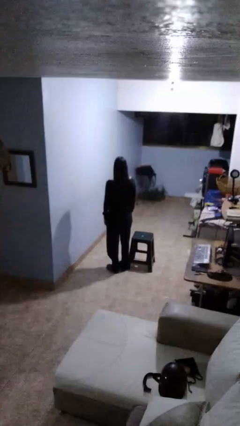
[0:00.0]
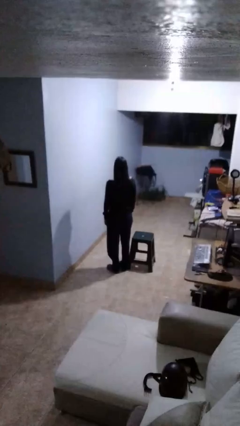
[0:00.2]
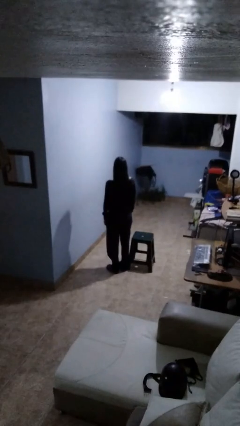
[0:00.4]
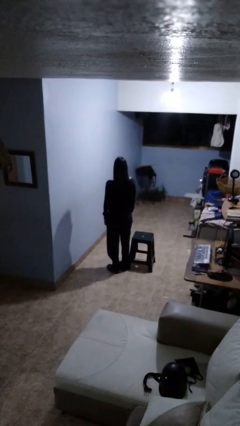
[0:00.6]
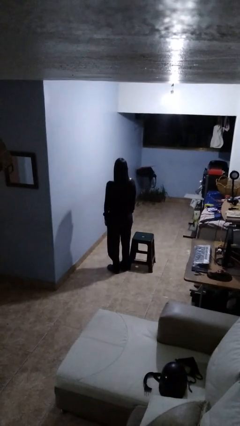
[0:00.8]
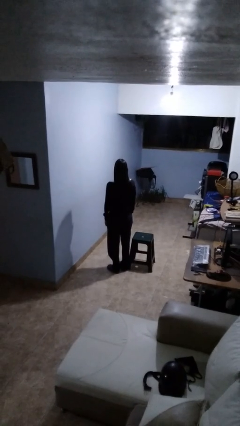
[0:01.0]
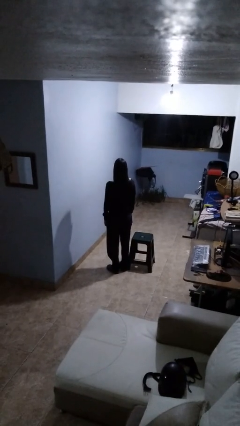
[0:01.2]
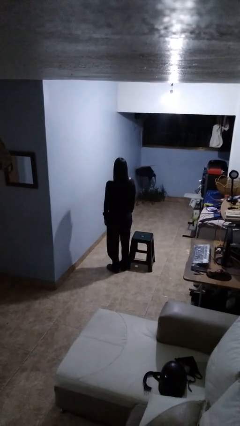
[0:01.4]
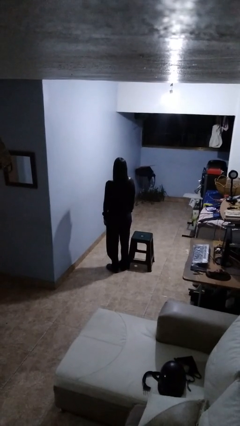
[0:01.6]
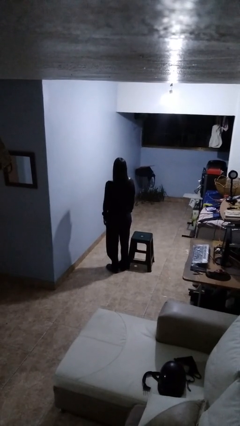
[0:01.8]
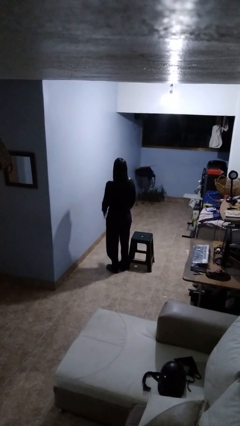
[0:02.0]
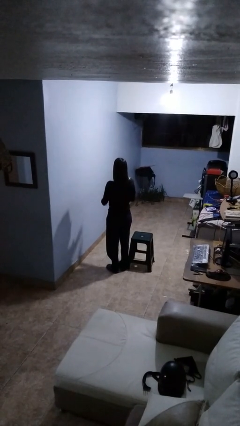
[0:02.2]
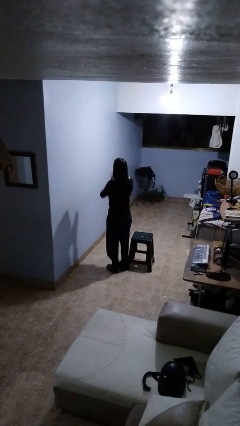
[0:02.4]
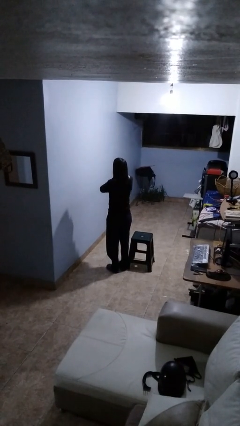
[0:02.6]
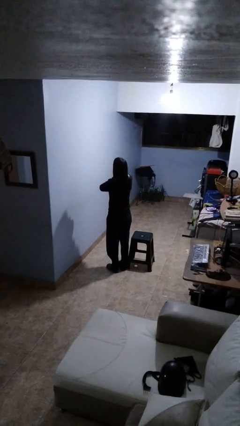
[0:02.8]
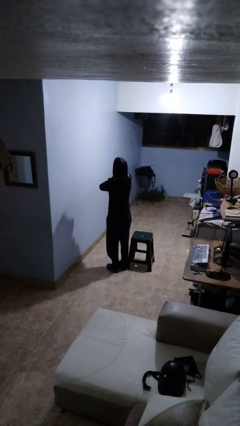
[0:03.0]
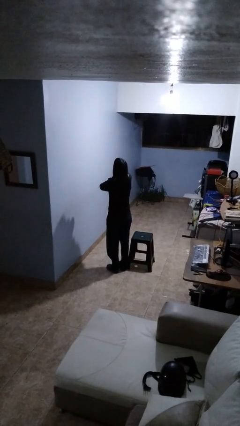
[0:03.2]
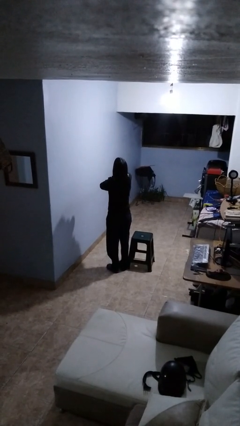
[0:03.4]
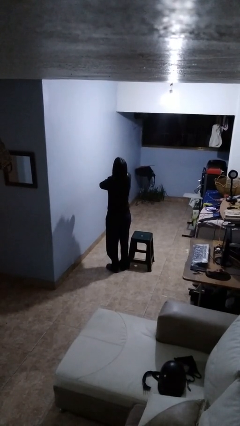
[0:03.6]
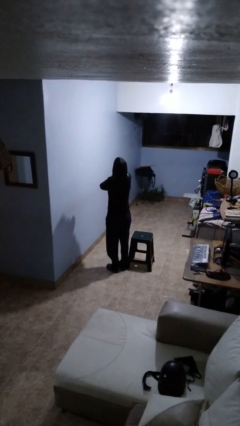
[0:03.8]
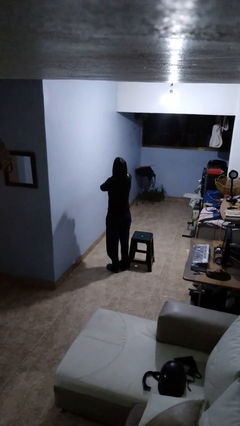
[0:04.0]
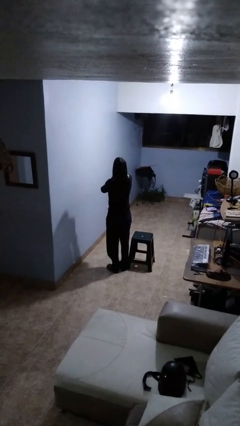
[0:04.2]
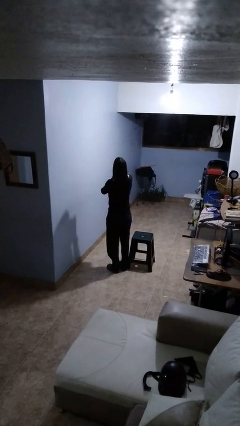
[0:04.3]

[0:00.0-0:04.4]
person yawns

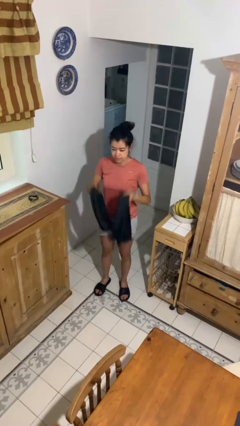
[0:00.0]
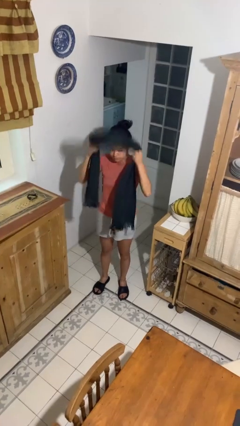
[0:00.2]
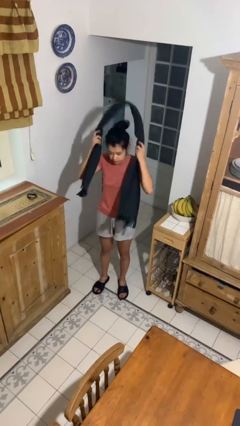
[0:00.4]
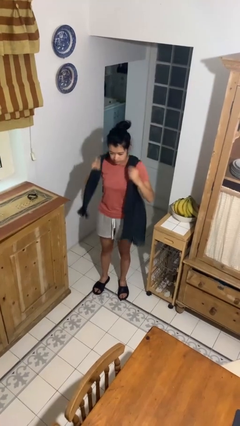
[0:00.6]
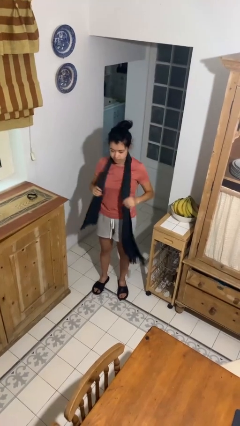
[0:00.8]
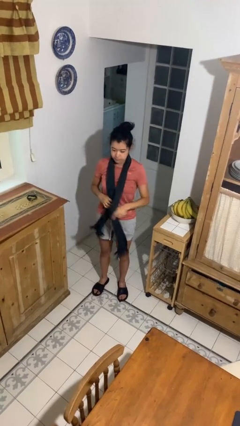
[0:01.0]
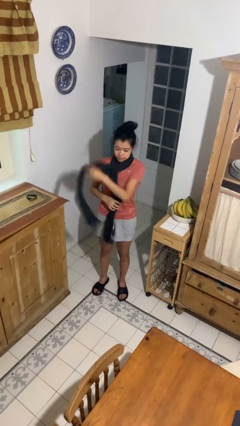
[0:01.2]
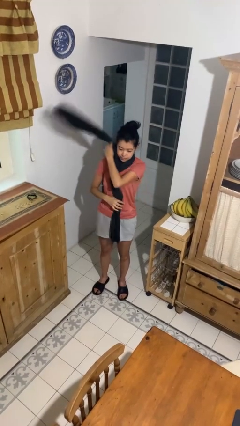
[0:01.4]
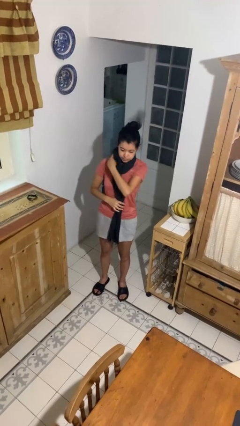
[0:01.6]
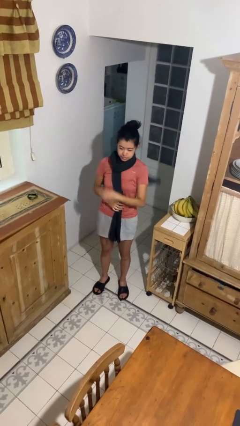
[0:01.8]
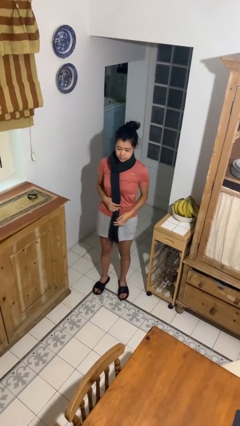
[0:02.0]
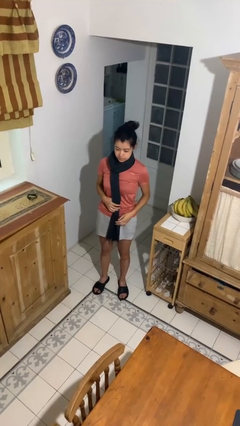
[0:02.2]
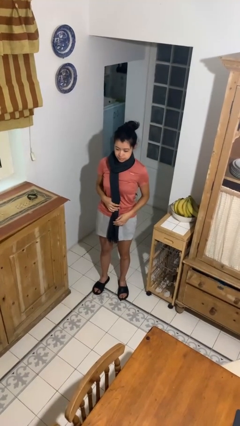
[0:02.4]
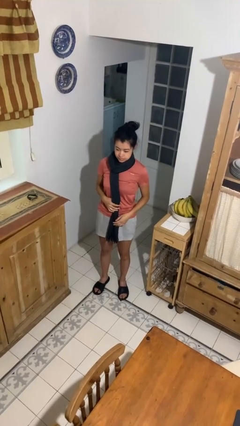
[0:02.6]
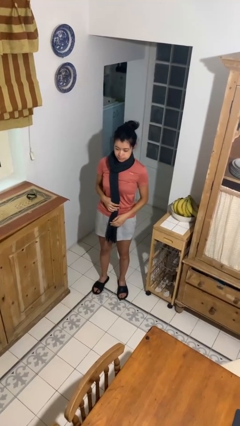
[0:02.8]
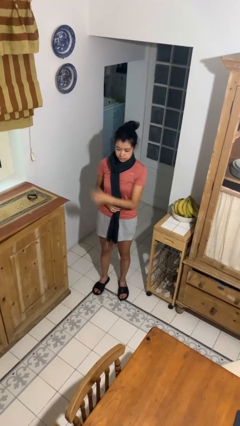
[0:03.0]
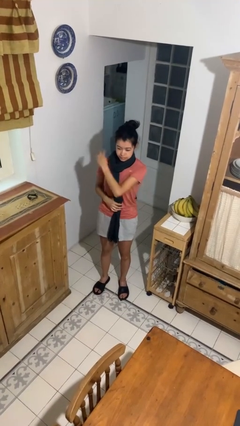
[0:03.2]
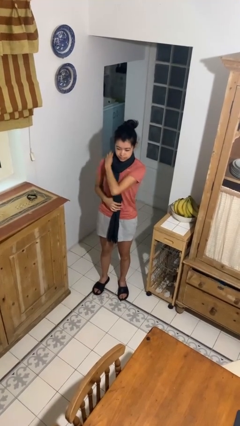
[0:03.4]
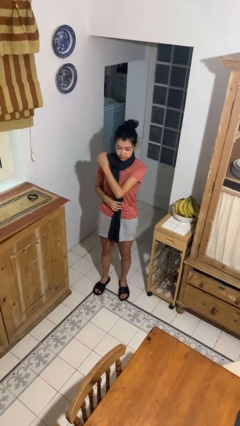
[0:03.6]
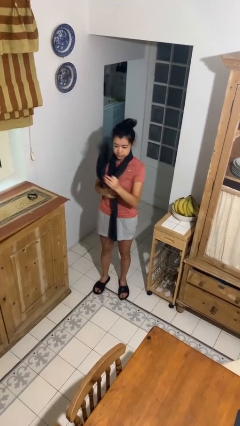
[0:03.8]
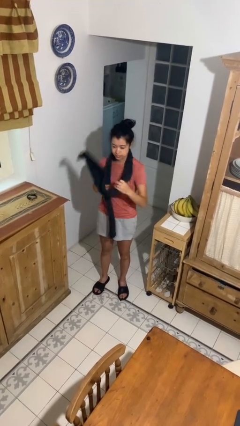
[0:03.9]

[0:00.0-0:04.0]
person puts on scarf

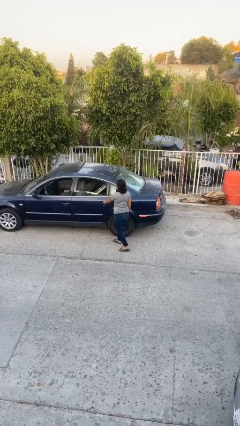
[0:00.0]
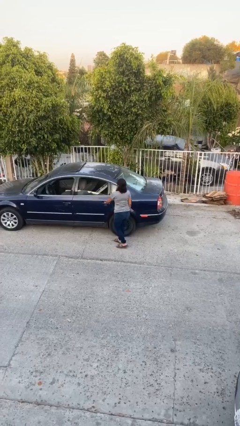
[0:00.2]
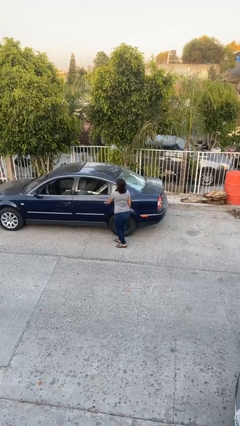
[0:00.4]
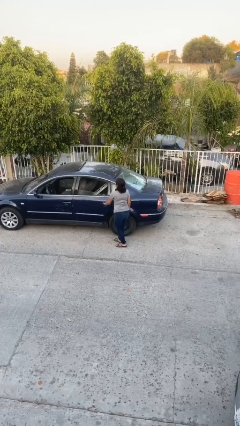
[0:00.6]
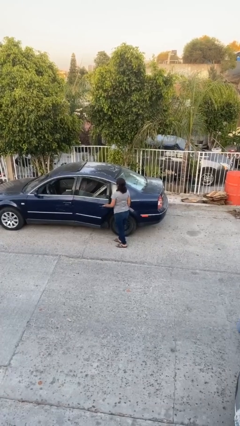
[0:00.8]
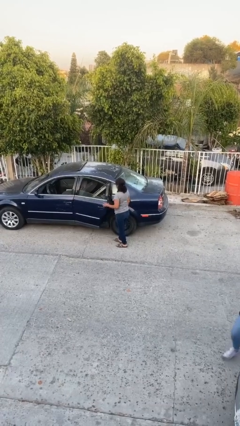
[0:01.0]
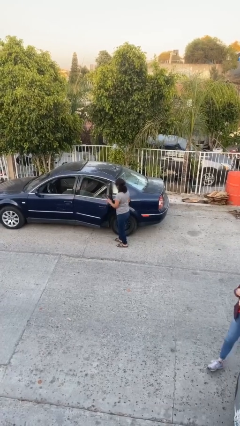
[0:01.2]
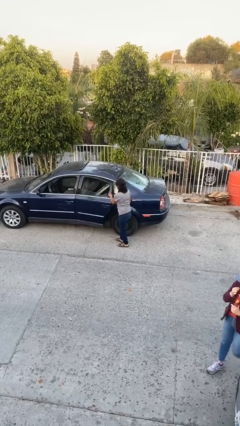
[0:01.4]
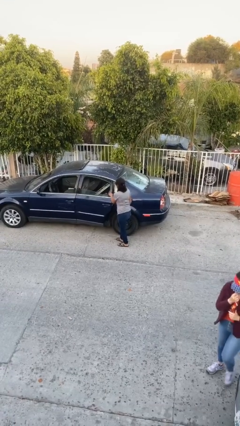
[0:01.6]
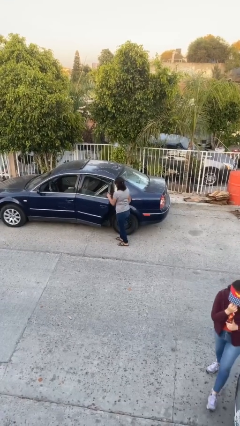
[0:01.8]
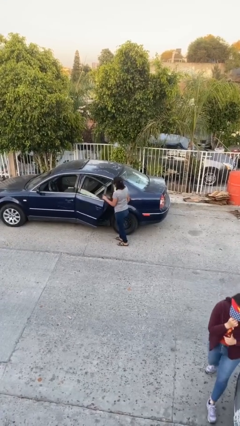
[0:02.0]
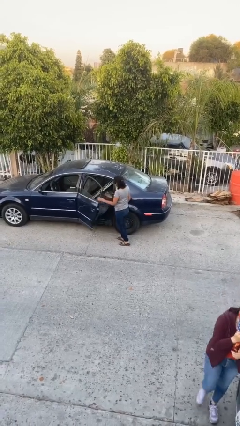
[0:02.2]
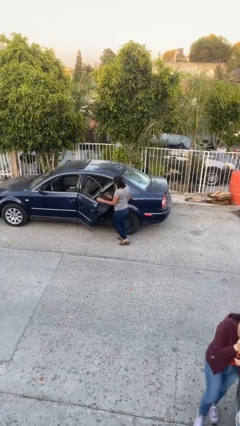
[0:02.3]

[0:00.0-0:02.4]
person opens car door

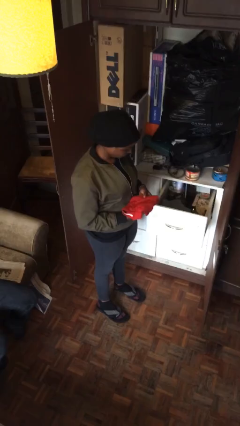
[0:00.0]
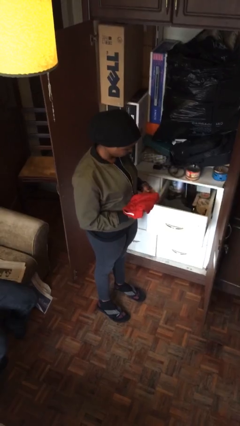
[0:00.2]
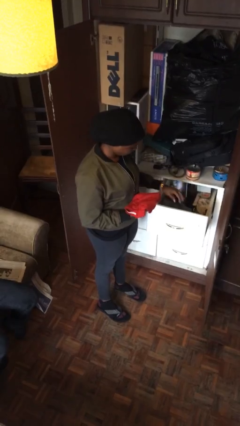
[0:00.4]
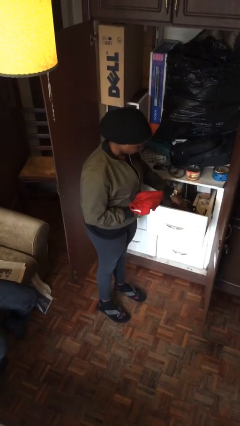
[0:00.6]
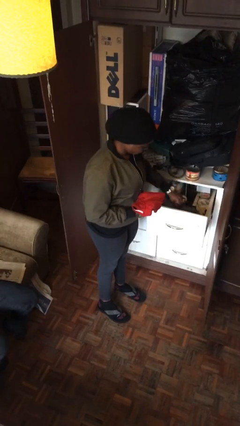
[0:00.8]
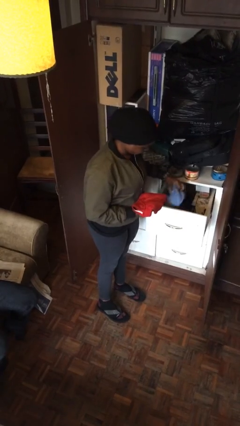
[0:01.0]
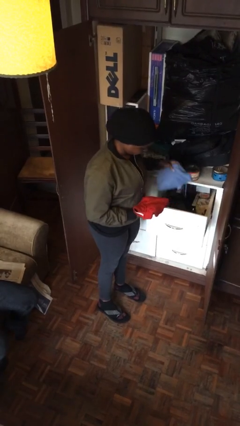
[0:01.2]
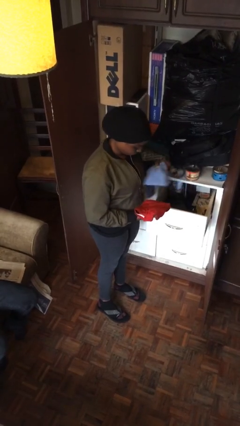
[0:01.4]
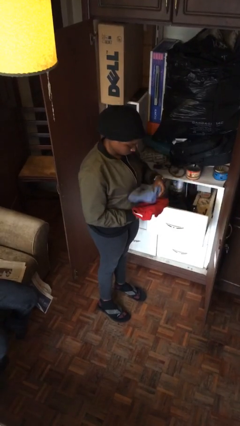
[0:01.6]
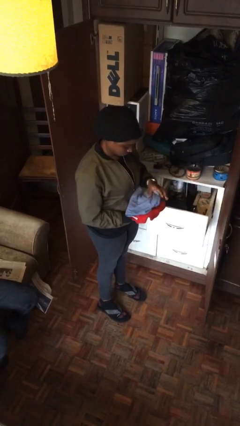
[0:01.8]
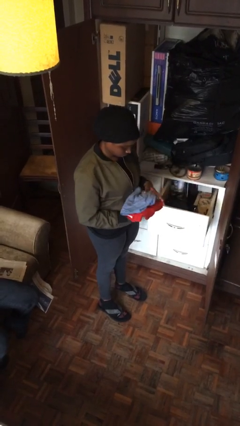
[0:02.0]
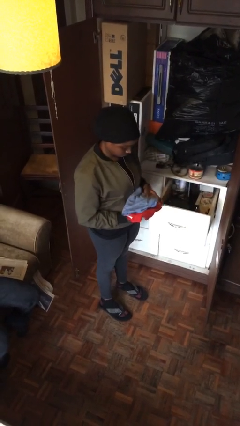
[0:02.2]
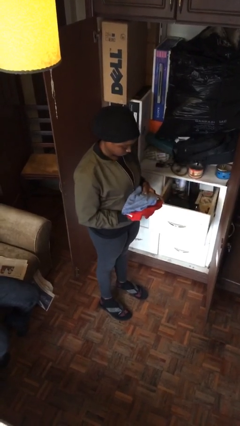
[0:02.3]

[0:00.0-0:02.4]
person takes clothes from dresser

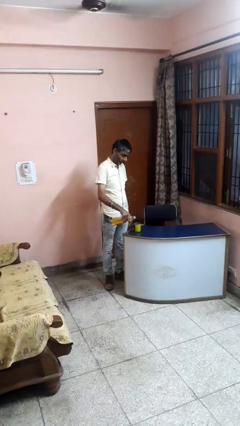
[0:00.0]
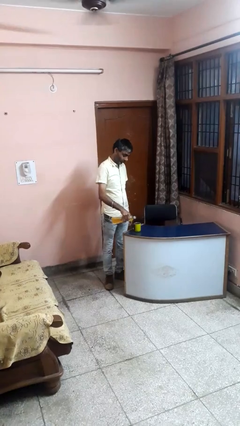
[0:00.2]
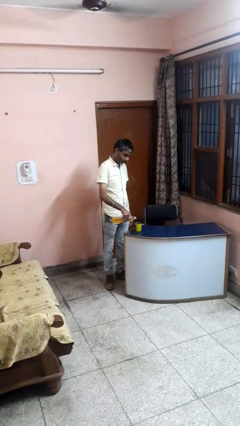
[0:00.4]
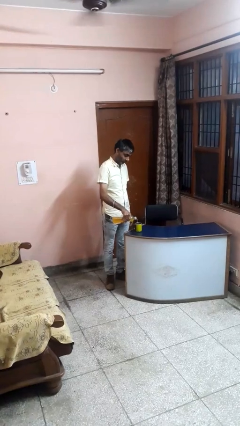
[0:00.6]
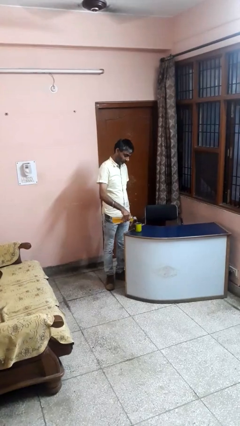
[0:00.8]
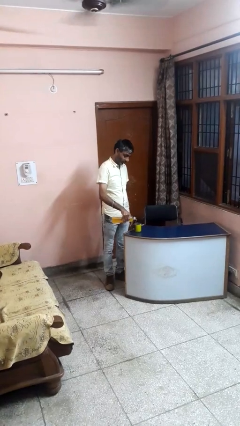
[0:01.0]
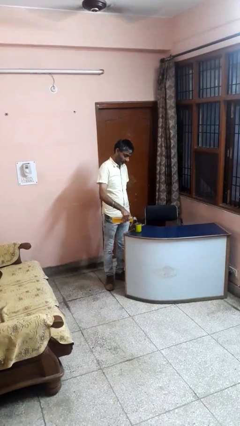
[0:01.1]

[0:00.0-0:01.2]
person pours liquid into cup

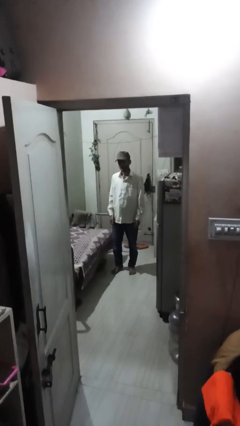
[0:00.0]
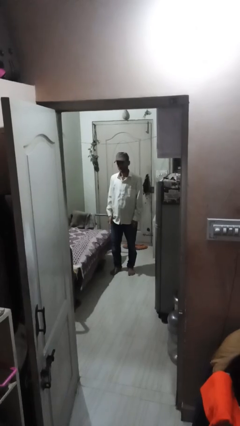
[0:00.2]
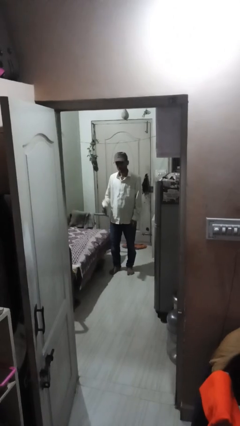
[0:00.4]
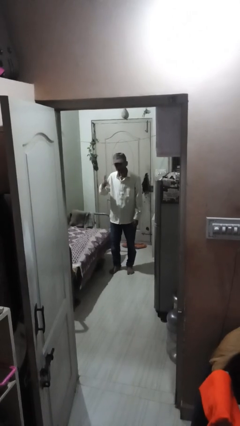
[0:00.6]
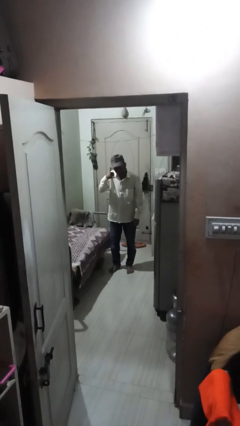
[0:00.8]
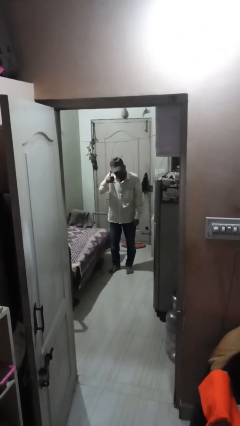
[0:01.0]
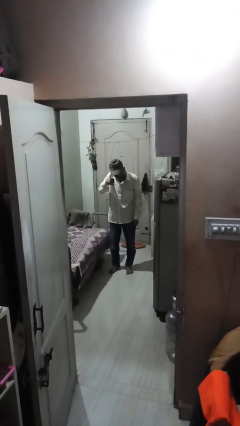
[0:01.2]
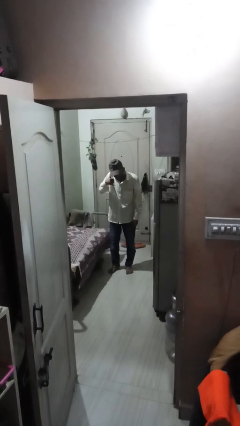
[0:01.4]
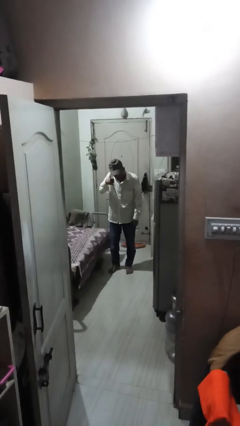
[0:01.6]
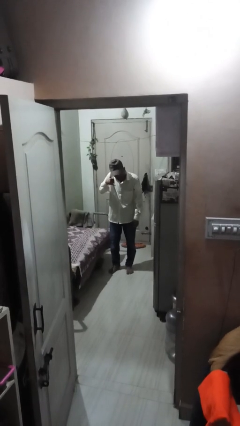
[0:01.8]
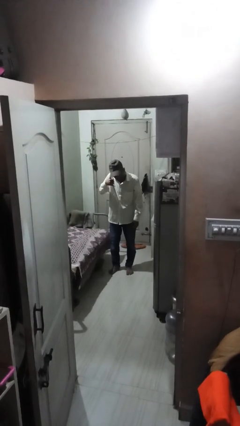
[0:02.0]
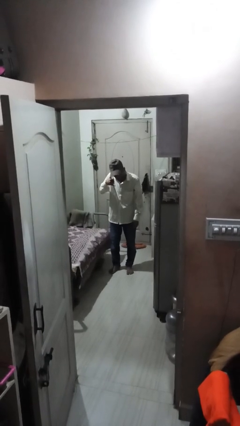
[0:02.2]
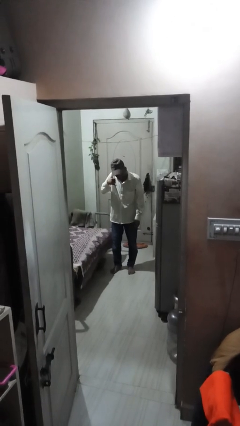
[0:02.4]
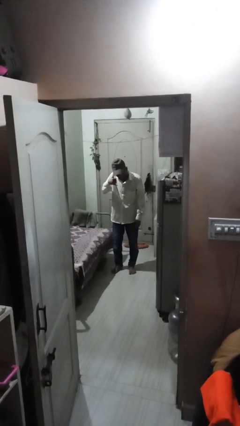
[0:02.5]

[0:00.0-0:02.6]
person gestures call me
